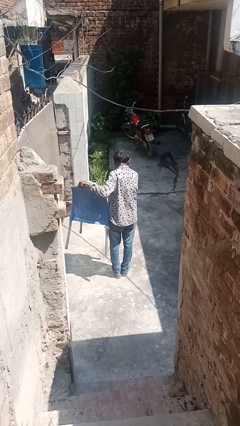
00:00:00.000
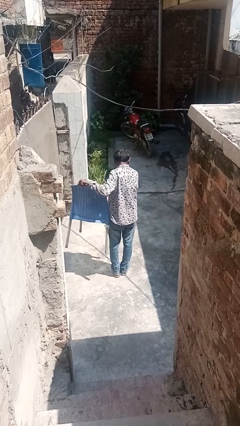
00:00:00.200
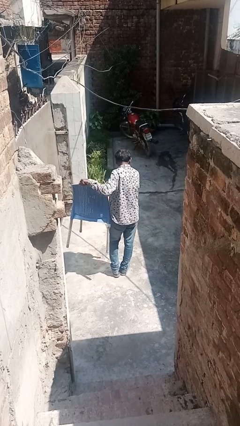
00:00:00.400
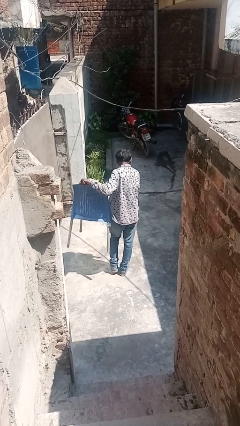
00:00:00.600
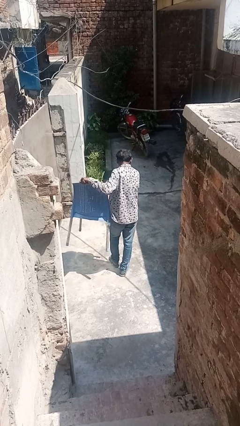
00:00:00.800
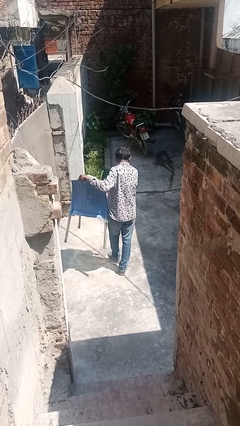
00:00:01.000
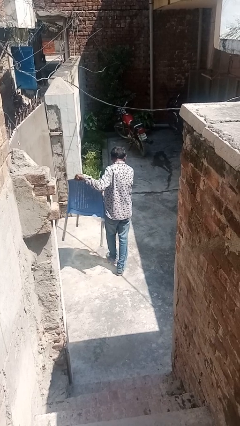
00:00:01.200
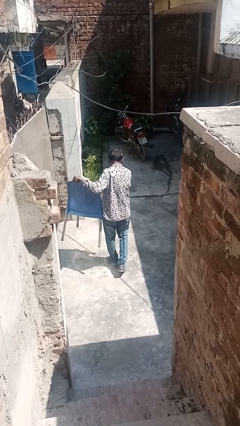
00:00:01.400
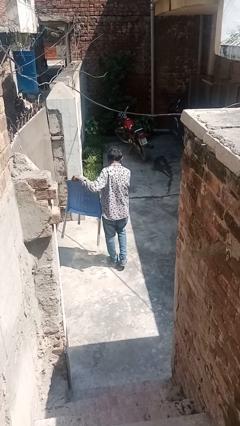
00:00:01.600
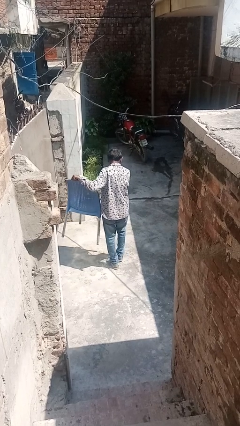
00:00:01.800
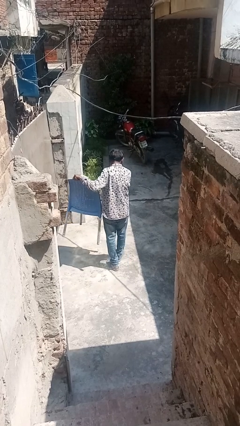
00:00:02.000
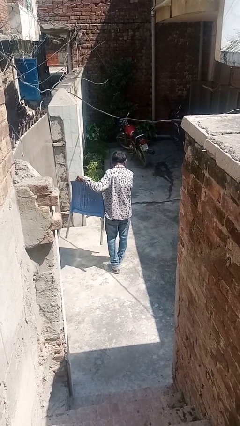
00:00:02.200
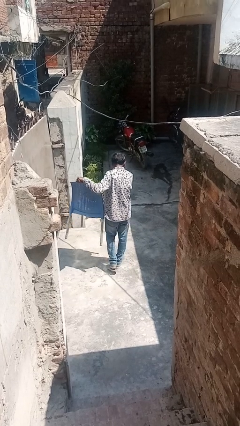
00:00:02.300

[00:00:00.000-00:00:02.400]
person carries furniture

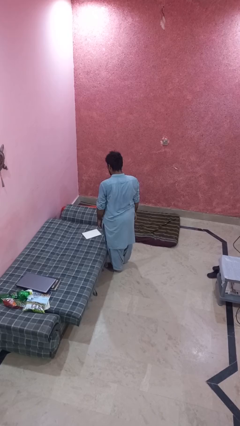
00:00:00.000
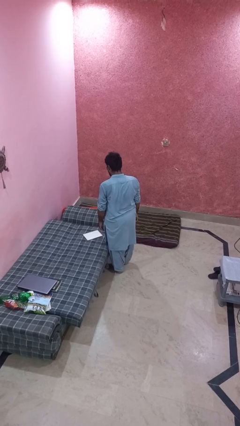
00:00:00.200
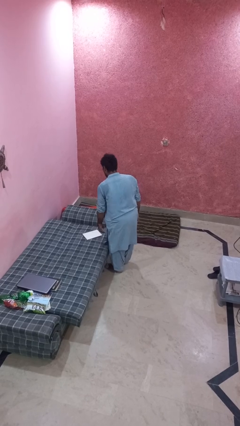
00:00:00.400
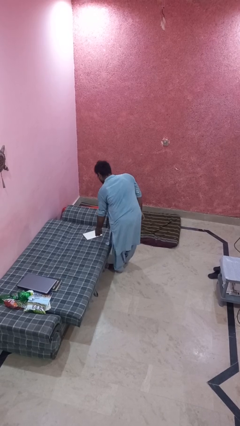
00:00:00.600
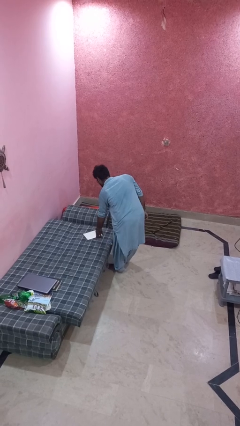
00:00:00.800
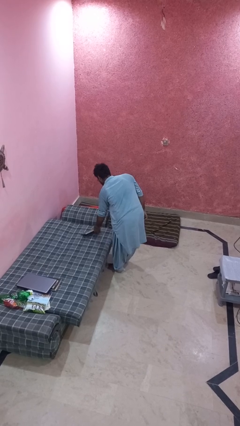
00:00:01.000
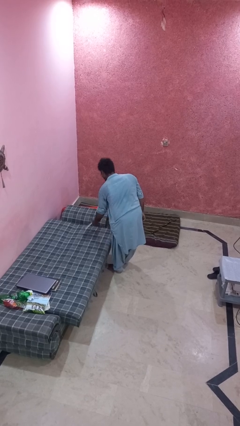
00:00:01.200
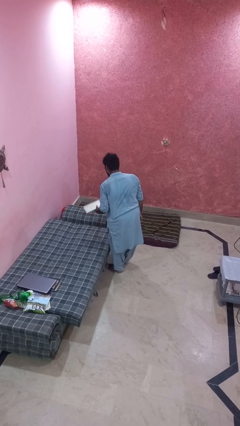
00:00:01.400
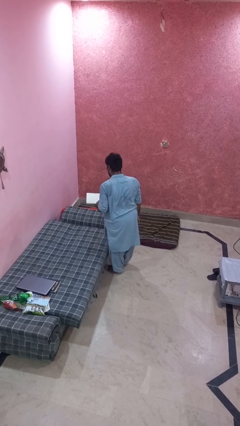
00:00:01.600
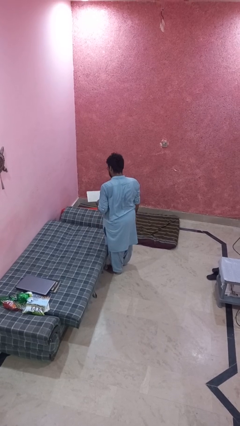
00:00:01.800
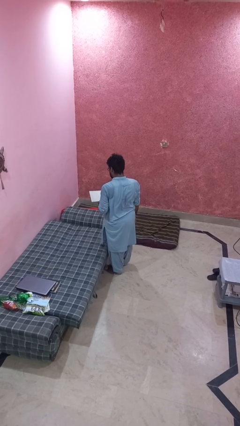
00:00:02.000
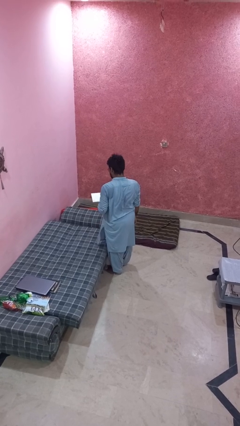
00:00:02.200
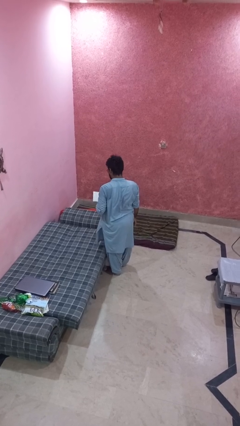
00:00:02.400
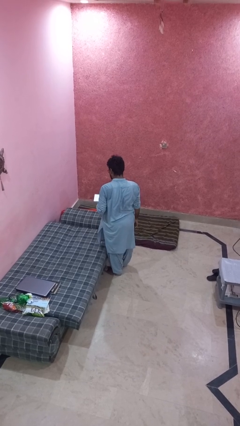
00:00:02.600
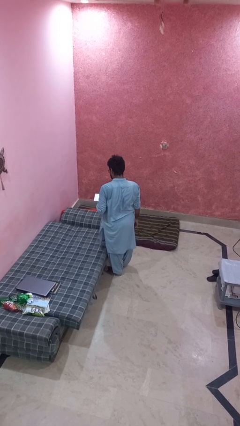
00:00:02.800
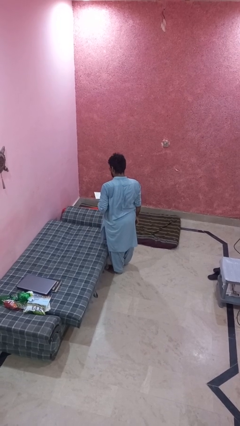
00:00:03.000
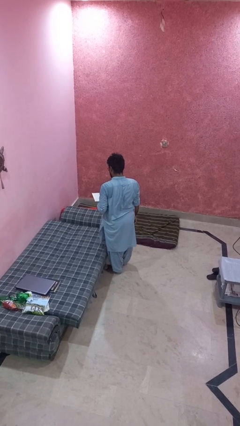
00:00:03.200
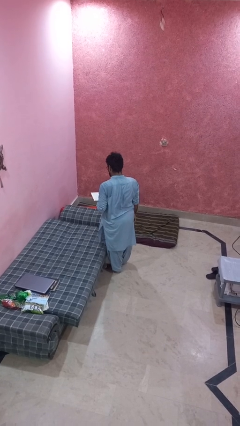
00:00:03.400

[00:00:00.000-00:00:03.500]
person picks up object from bed

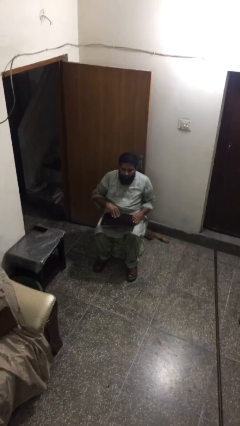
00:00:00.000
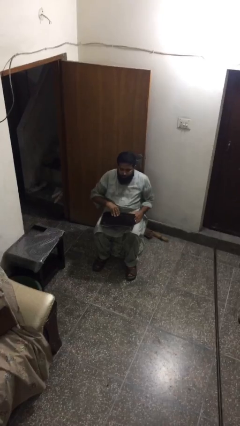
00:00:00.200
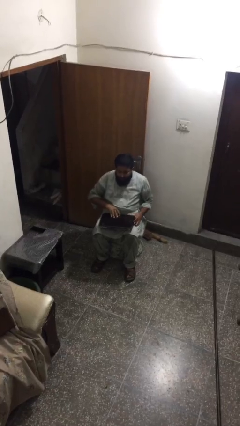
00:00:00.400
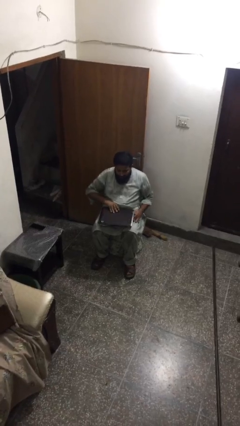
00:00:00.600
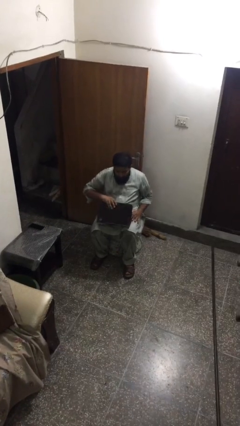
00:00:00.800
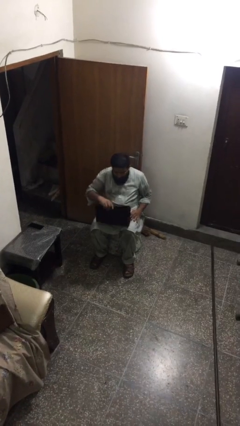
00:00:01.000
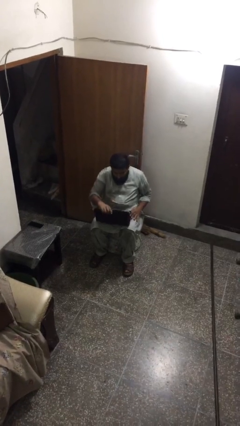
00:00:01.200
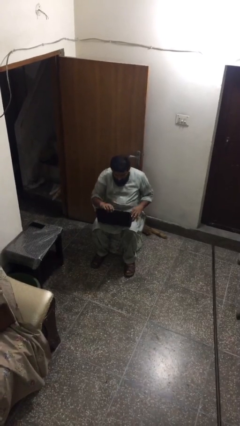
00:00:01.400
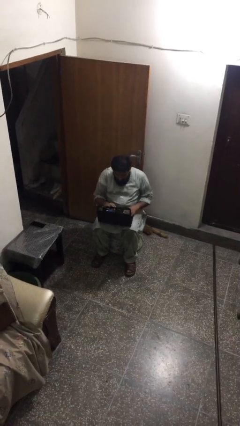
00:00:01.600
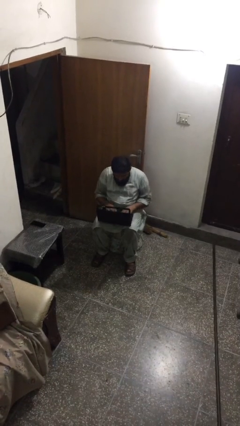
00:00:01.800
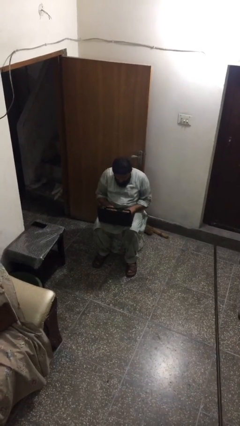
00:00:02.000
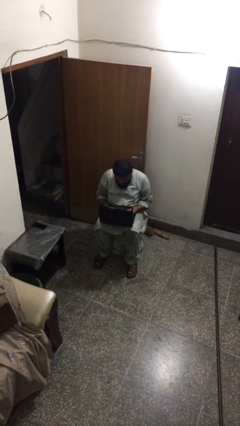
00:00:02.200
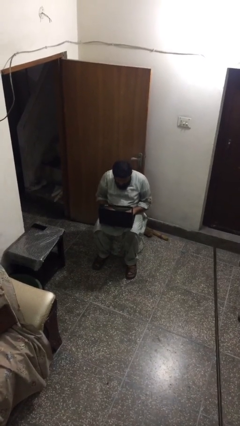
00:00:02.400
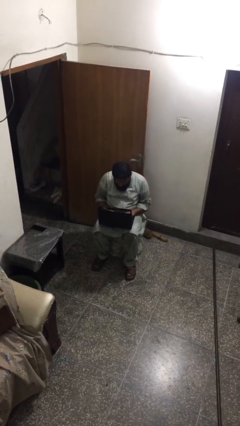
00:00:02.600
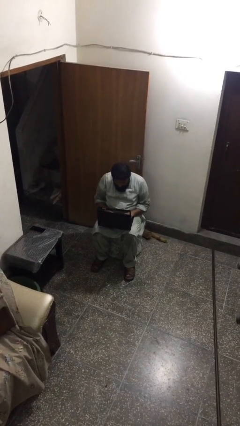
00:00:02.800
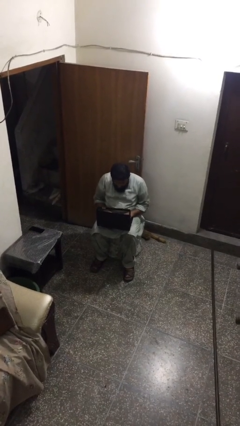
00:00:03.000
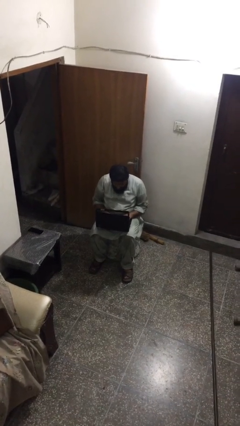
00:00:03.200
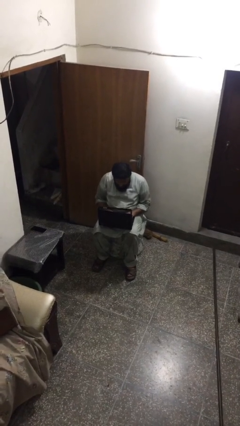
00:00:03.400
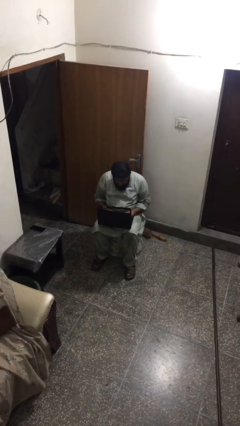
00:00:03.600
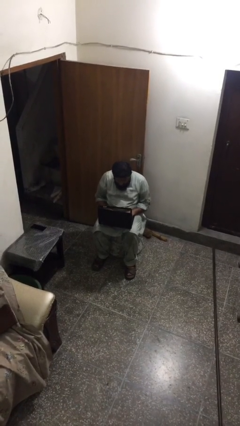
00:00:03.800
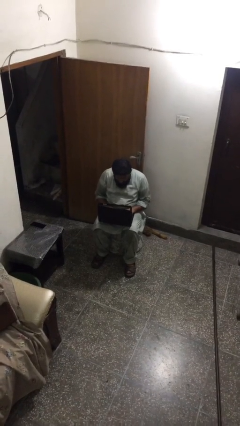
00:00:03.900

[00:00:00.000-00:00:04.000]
person interacts with laptop

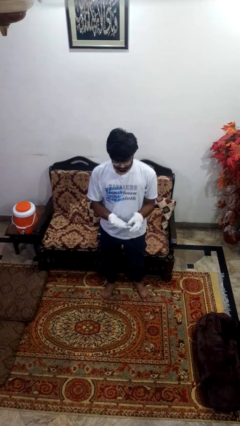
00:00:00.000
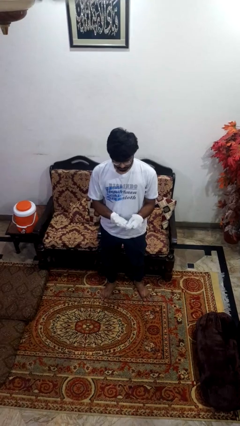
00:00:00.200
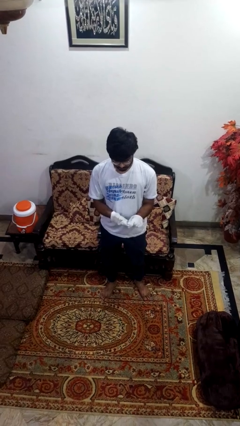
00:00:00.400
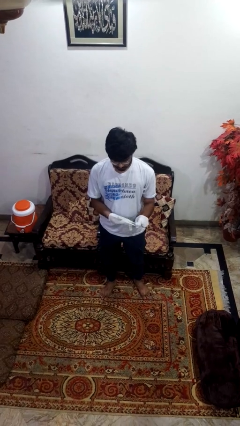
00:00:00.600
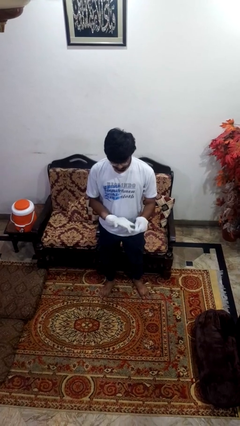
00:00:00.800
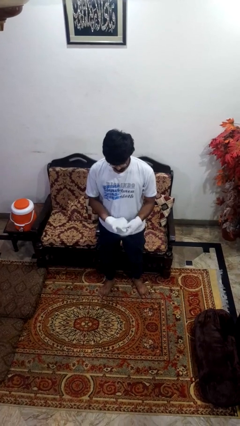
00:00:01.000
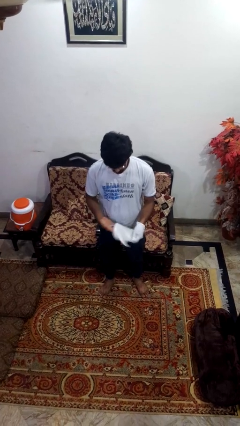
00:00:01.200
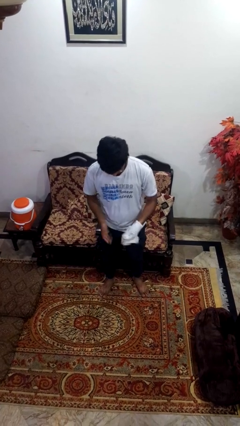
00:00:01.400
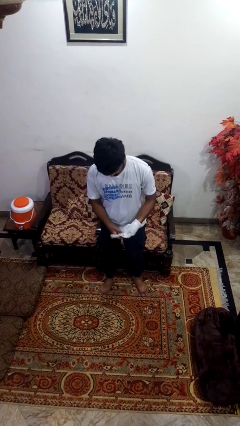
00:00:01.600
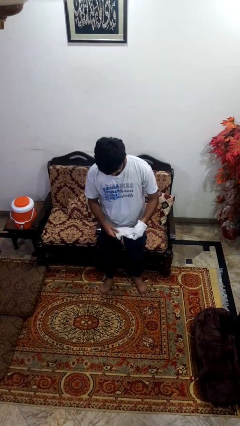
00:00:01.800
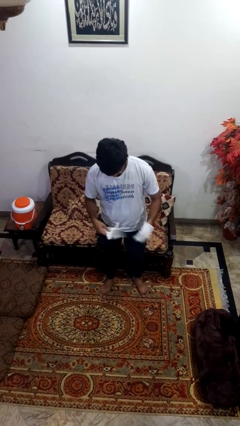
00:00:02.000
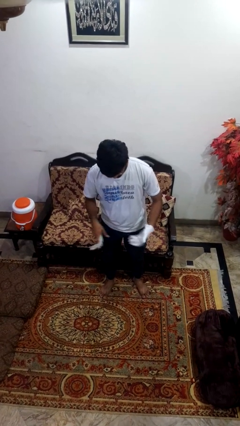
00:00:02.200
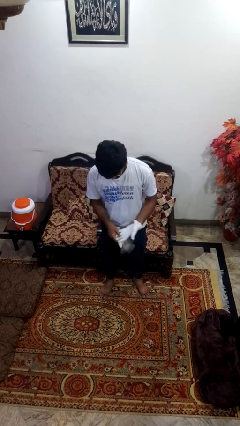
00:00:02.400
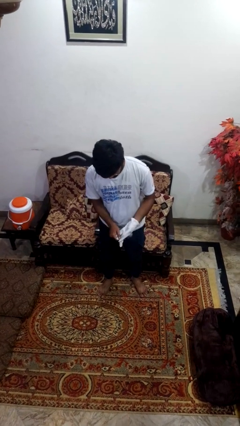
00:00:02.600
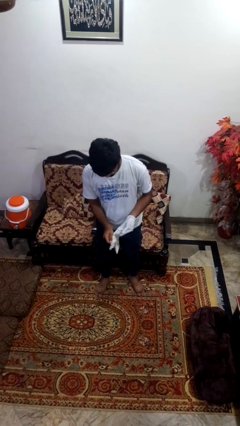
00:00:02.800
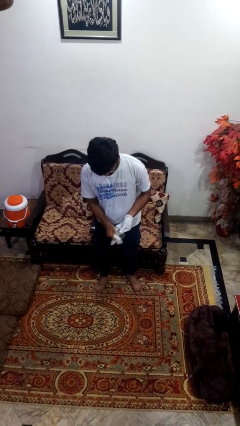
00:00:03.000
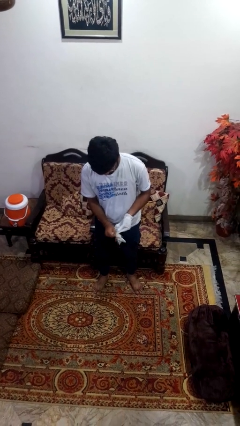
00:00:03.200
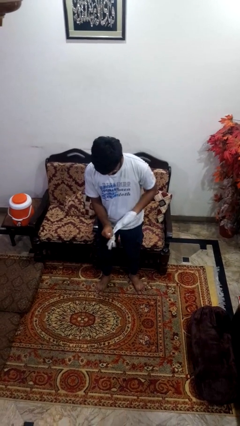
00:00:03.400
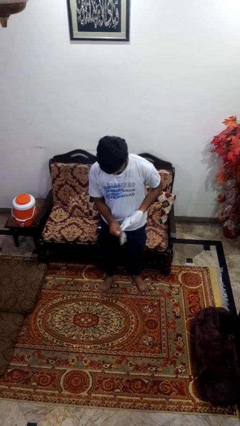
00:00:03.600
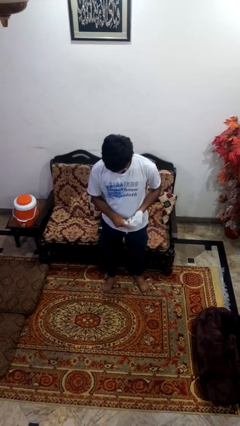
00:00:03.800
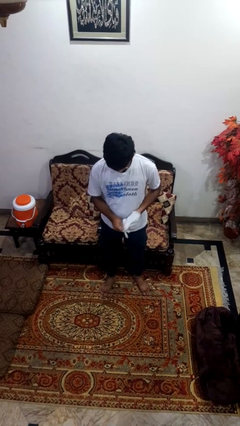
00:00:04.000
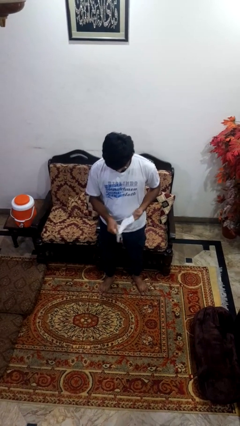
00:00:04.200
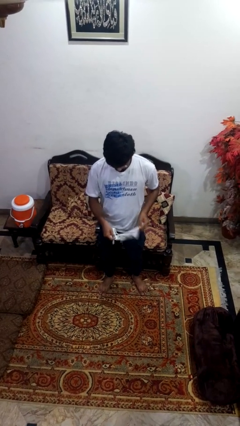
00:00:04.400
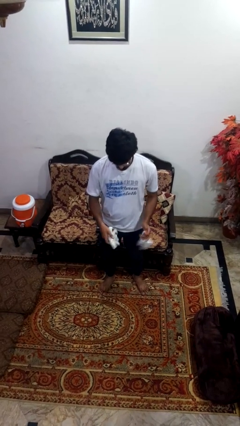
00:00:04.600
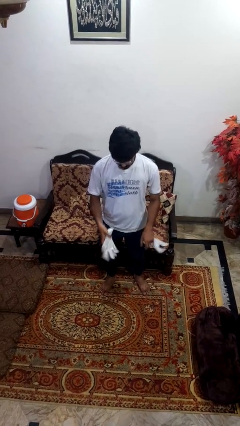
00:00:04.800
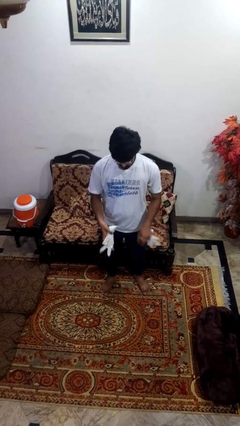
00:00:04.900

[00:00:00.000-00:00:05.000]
person takes off gloves

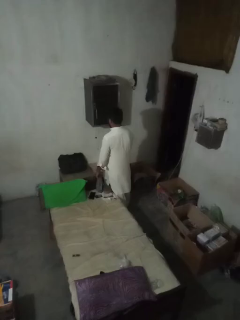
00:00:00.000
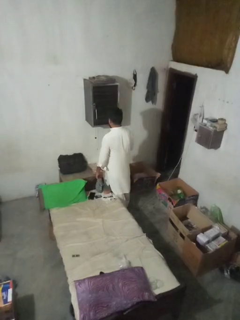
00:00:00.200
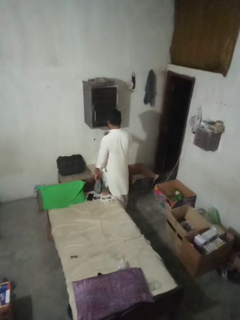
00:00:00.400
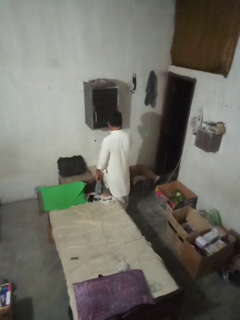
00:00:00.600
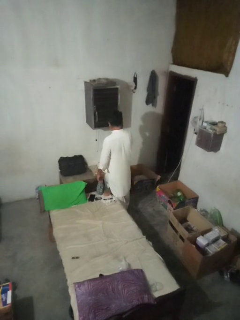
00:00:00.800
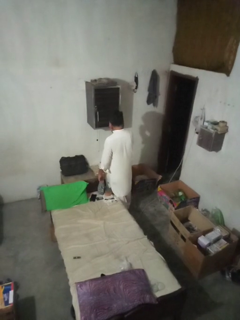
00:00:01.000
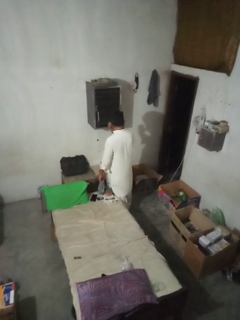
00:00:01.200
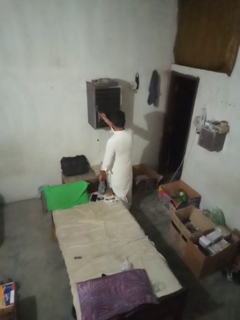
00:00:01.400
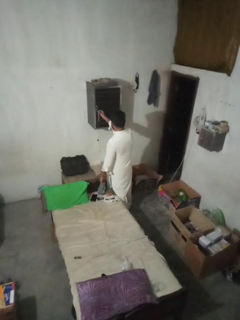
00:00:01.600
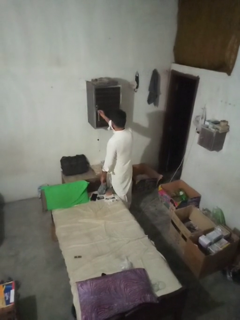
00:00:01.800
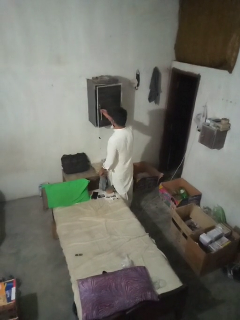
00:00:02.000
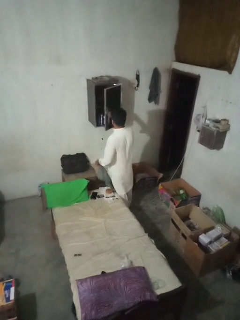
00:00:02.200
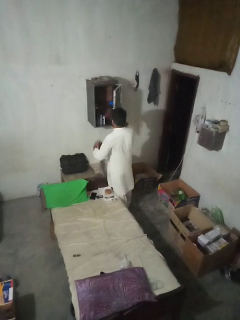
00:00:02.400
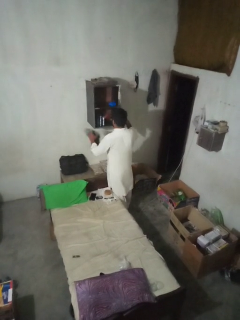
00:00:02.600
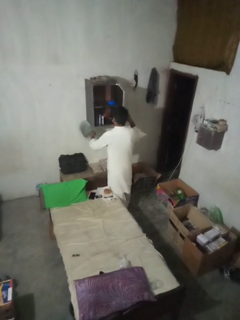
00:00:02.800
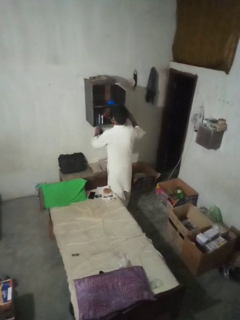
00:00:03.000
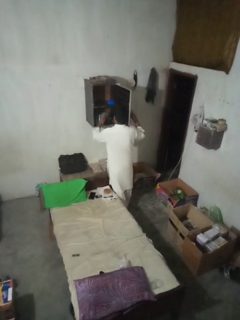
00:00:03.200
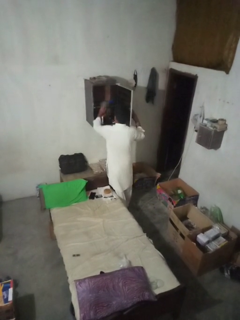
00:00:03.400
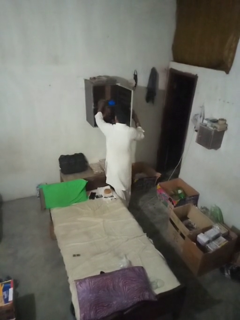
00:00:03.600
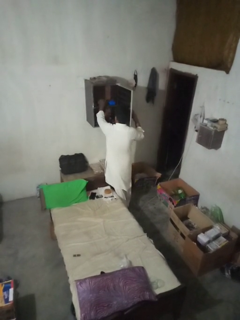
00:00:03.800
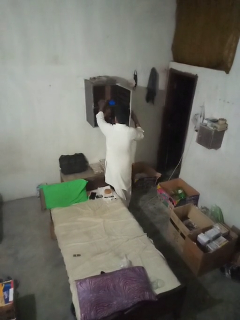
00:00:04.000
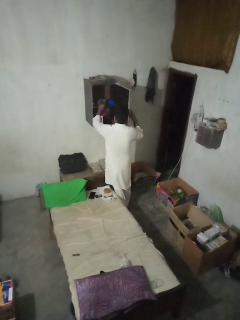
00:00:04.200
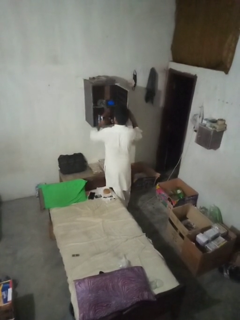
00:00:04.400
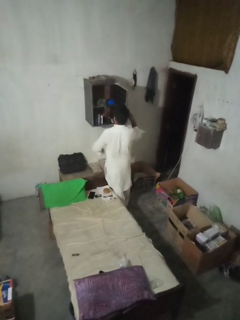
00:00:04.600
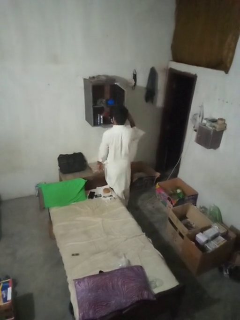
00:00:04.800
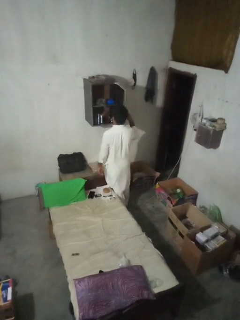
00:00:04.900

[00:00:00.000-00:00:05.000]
person puts clothes into dresser
